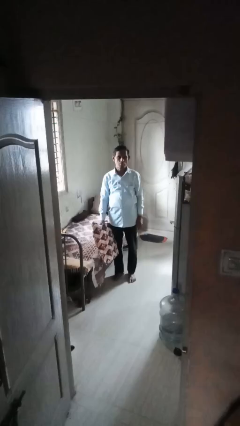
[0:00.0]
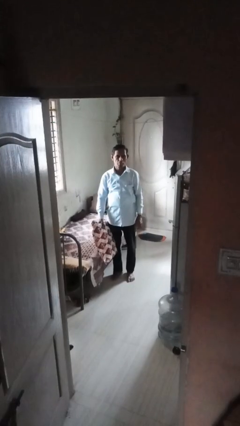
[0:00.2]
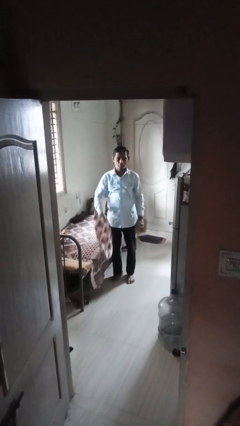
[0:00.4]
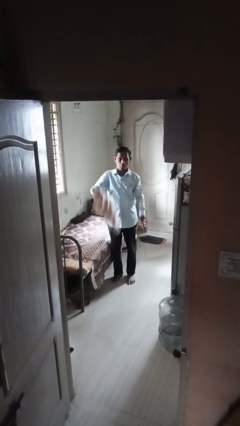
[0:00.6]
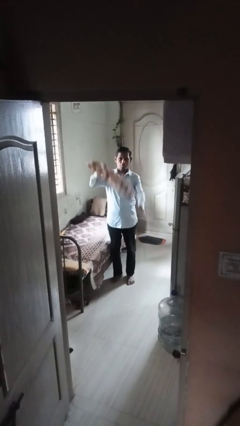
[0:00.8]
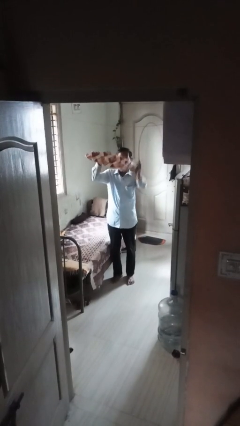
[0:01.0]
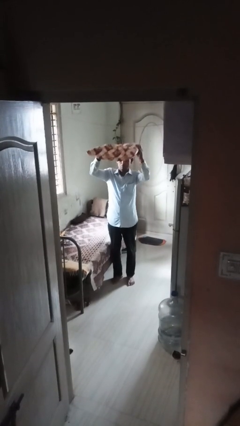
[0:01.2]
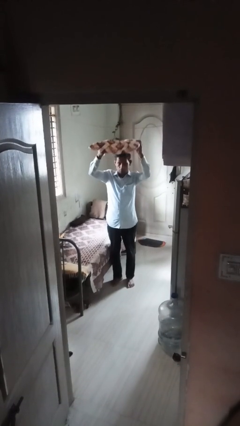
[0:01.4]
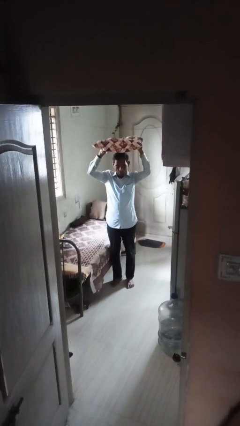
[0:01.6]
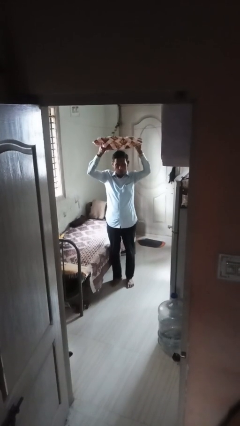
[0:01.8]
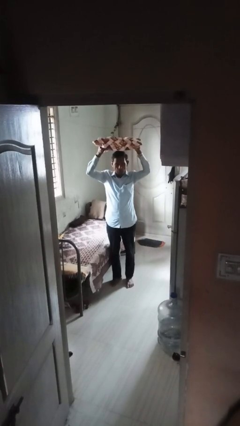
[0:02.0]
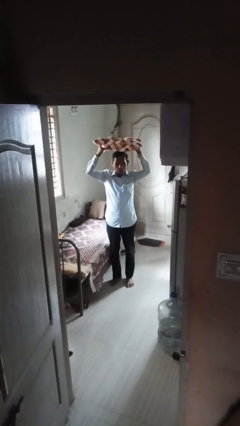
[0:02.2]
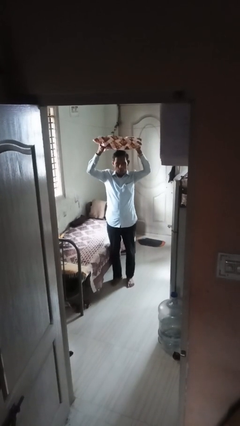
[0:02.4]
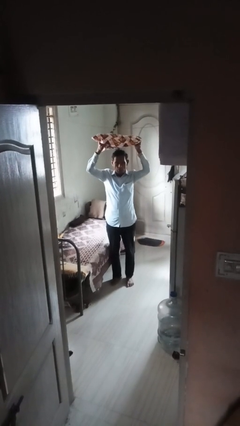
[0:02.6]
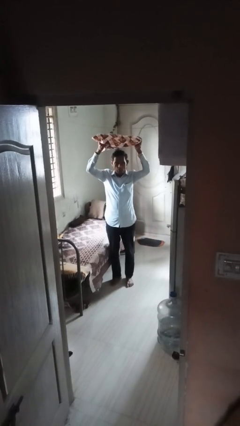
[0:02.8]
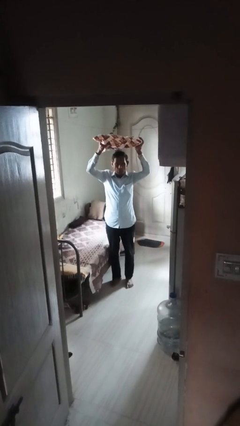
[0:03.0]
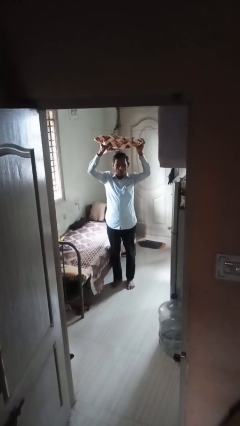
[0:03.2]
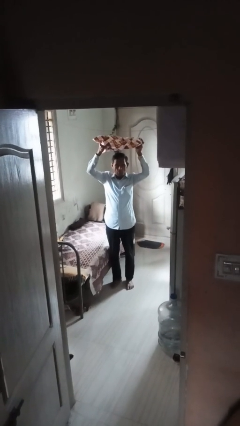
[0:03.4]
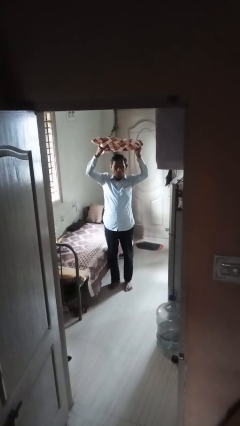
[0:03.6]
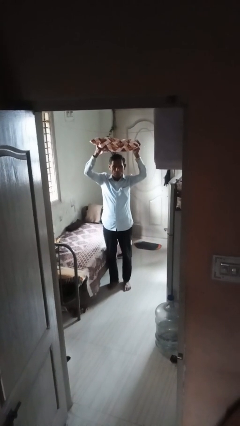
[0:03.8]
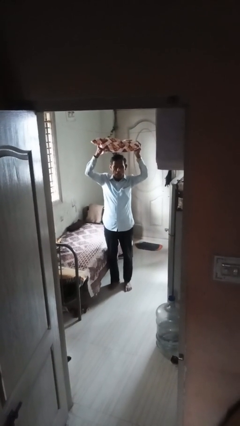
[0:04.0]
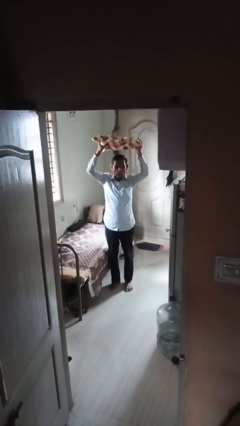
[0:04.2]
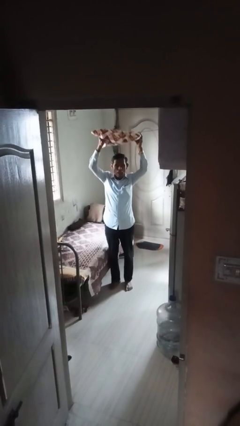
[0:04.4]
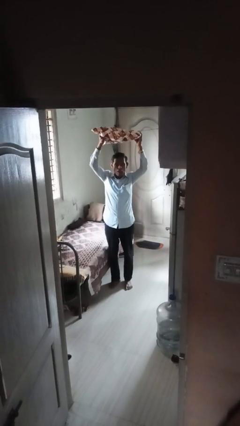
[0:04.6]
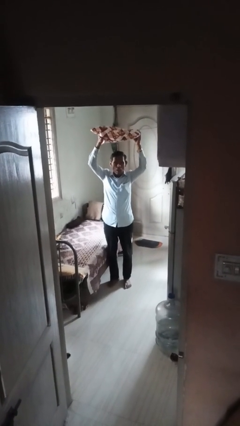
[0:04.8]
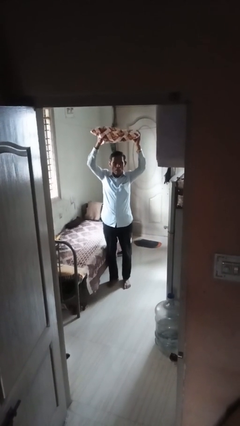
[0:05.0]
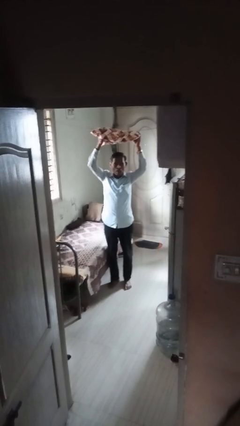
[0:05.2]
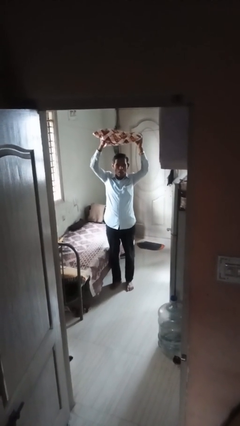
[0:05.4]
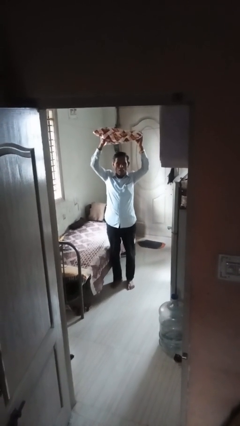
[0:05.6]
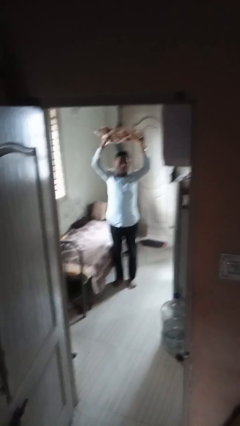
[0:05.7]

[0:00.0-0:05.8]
person holds object above head

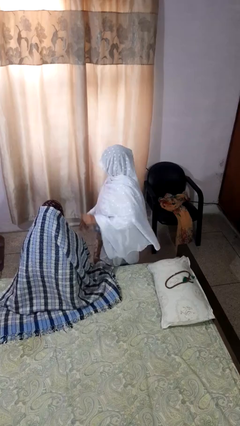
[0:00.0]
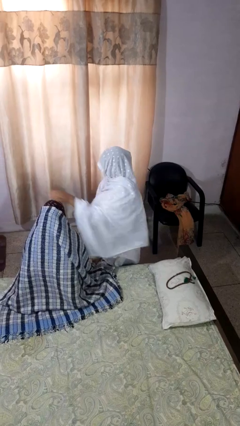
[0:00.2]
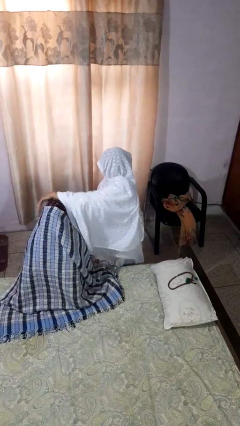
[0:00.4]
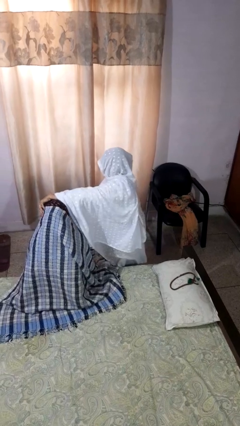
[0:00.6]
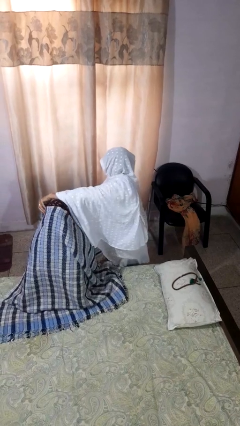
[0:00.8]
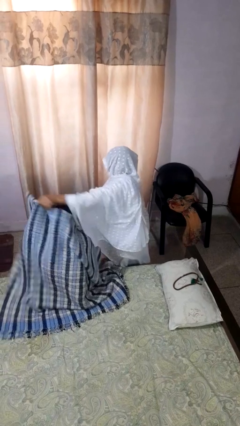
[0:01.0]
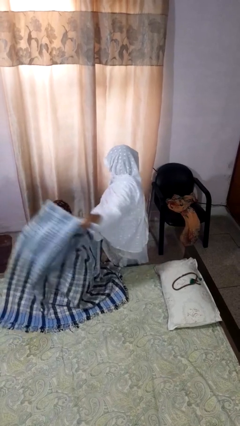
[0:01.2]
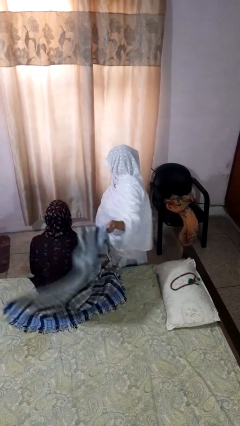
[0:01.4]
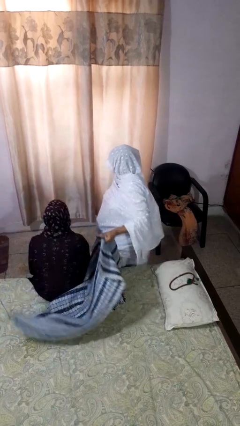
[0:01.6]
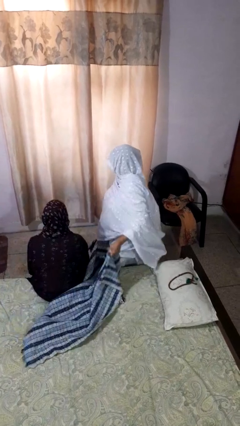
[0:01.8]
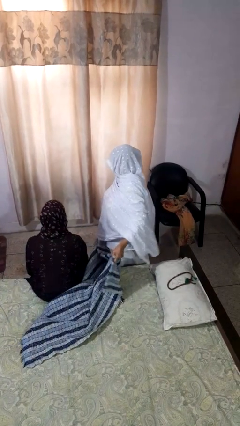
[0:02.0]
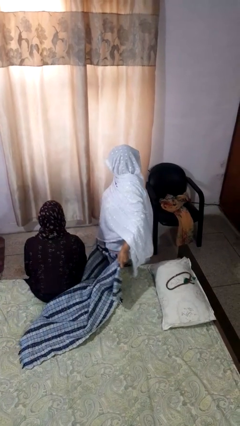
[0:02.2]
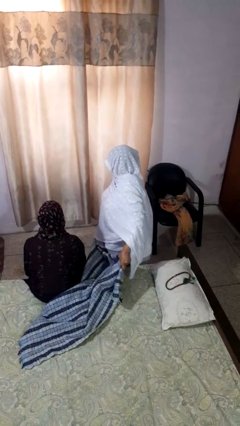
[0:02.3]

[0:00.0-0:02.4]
person uncovers friend with blanket

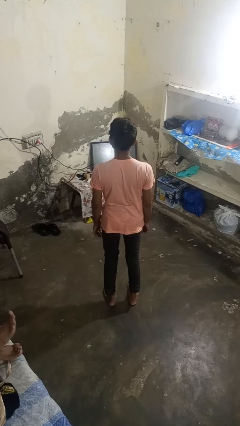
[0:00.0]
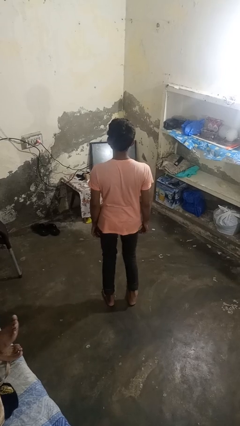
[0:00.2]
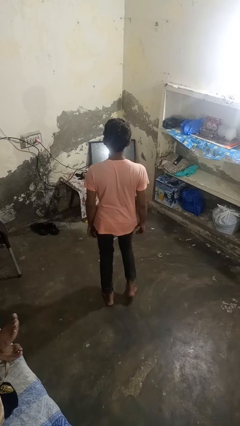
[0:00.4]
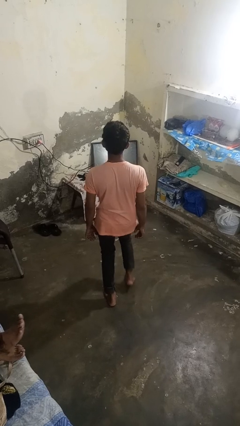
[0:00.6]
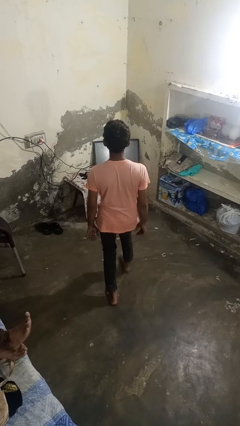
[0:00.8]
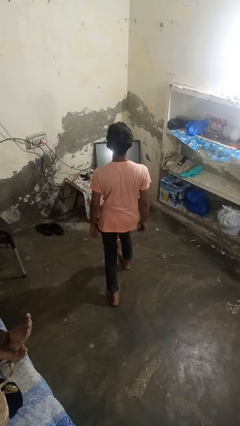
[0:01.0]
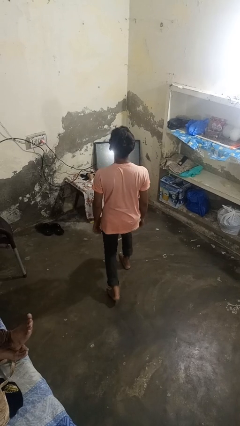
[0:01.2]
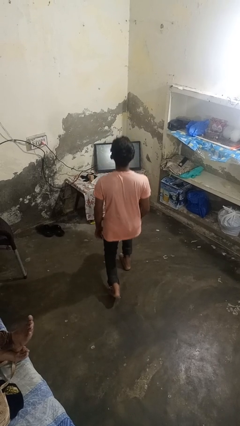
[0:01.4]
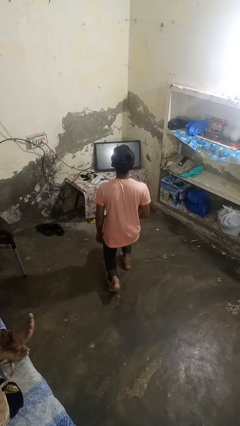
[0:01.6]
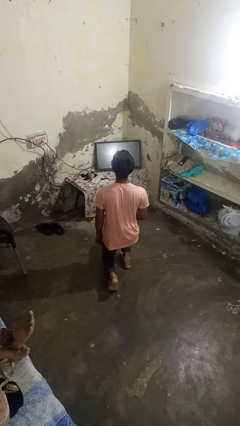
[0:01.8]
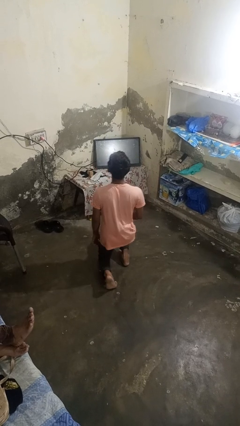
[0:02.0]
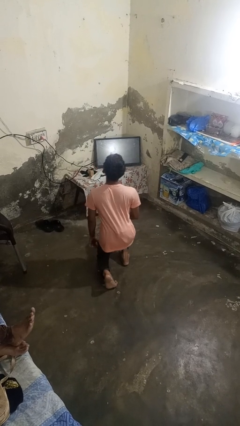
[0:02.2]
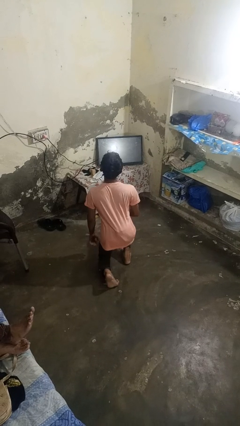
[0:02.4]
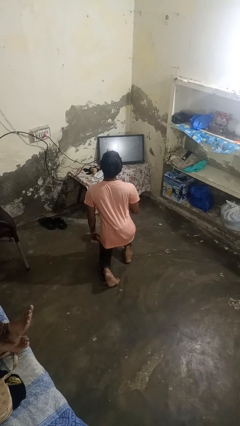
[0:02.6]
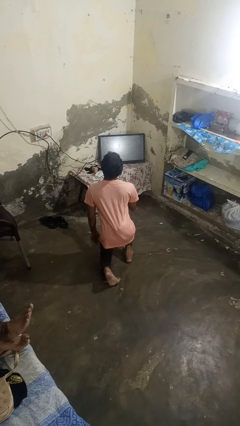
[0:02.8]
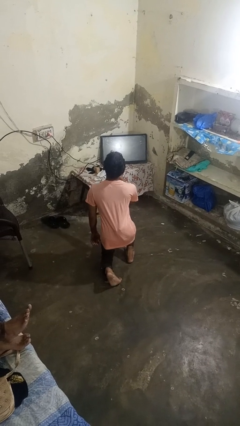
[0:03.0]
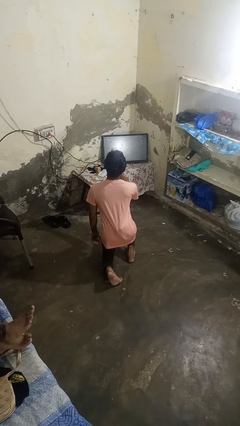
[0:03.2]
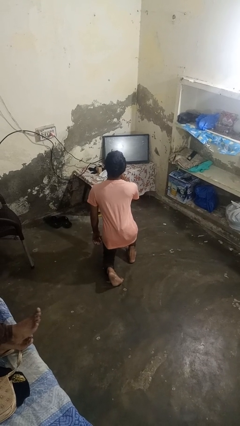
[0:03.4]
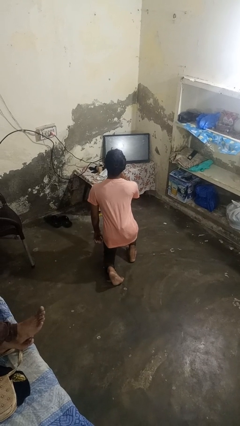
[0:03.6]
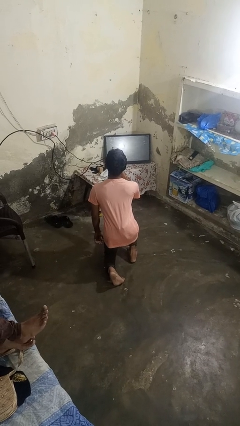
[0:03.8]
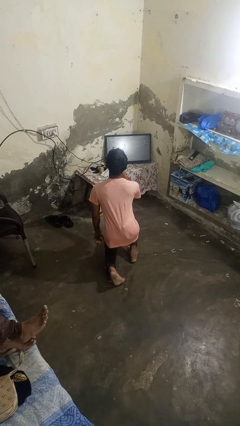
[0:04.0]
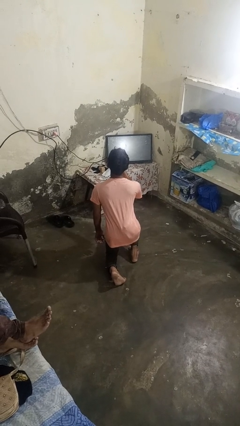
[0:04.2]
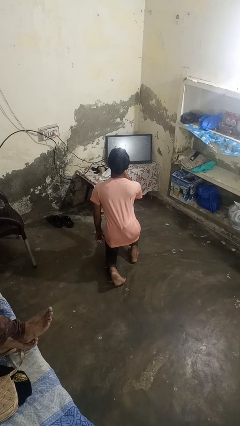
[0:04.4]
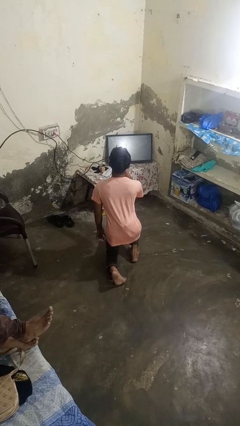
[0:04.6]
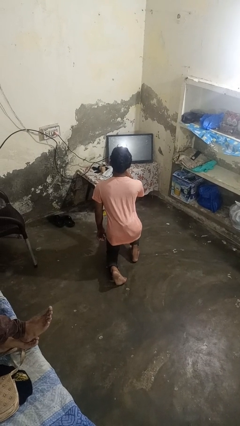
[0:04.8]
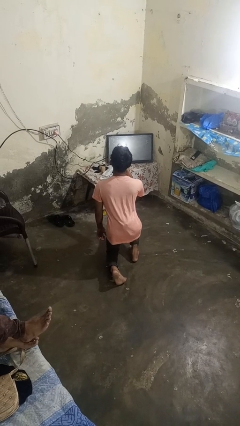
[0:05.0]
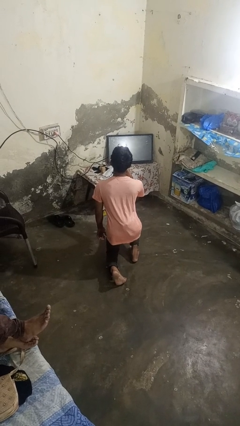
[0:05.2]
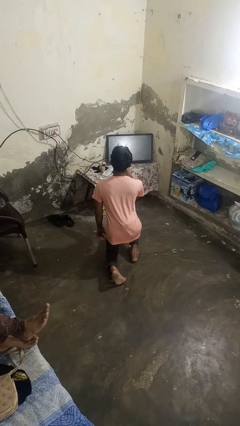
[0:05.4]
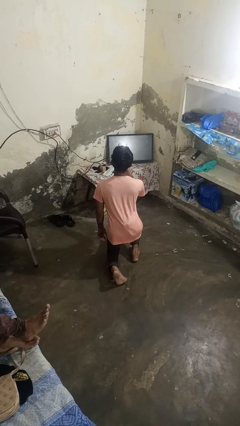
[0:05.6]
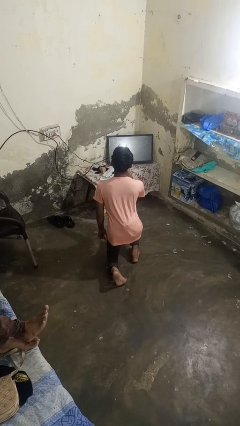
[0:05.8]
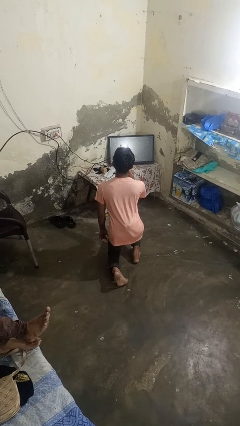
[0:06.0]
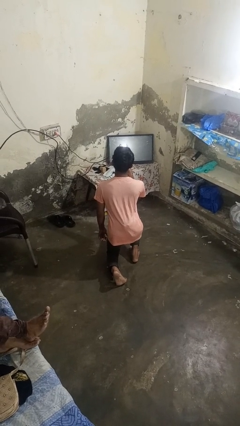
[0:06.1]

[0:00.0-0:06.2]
person kneels

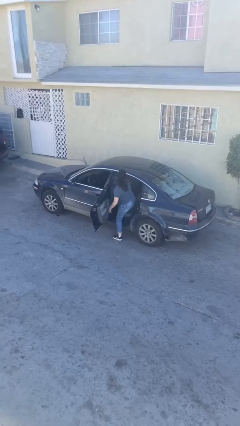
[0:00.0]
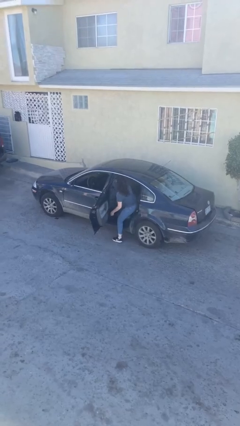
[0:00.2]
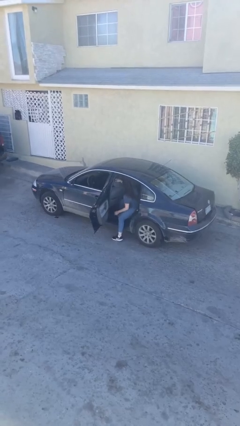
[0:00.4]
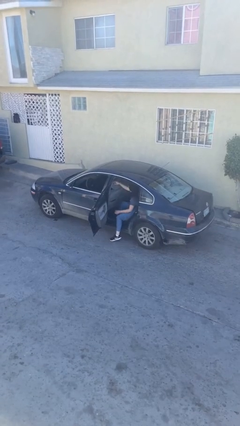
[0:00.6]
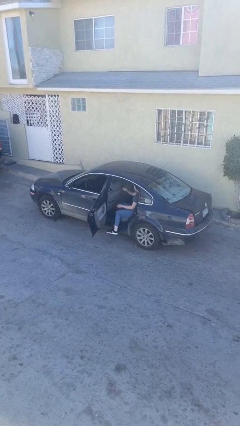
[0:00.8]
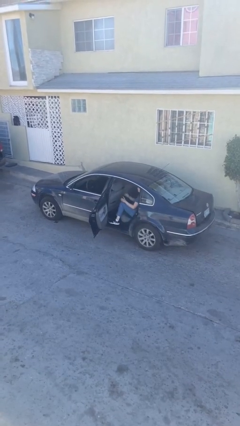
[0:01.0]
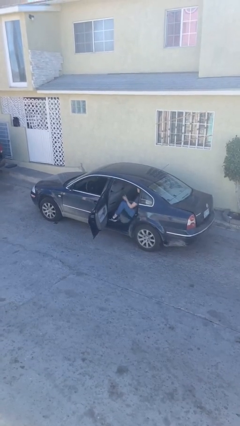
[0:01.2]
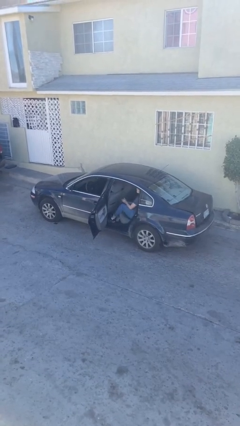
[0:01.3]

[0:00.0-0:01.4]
person enters car

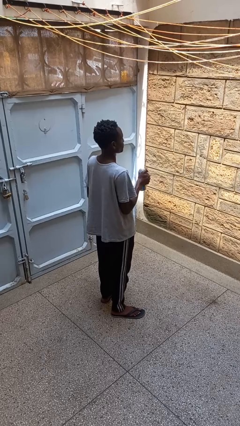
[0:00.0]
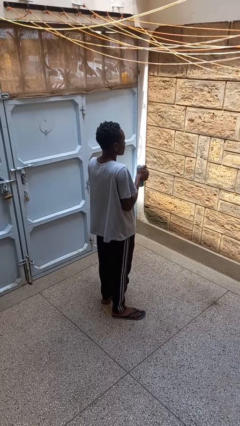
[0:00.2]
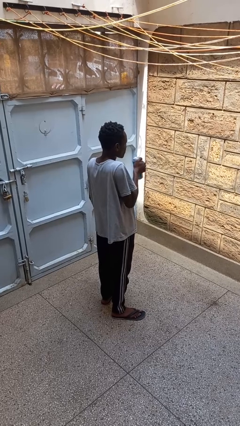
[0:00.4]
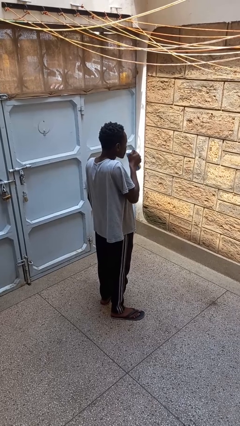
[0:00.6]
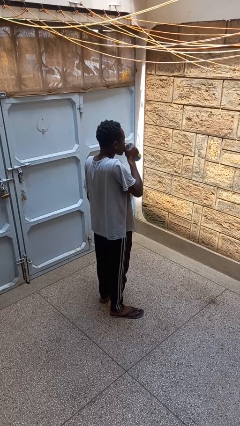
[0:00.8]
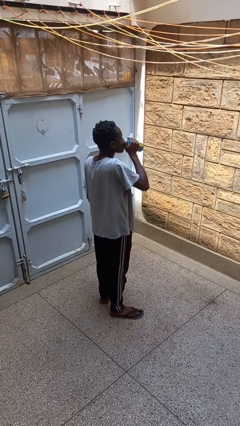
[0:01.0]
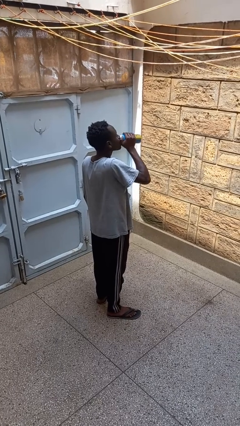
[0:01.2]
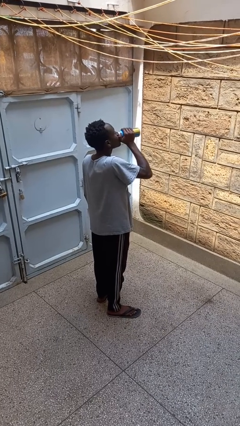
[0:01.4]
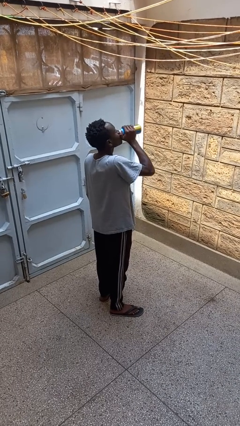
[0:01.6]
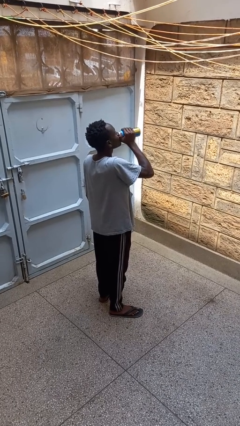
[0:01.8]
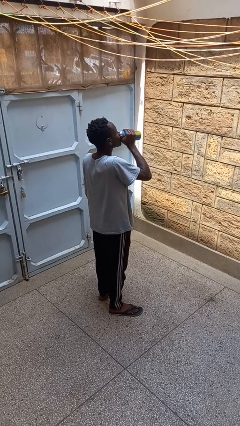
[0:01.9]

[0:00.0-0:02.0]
person drinks from beverage can
